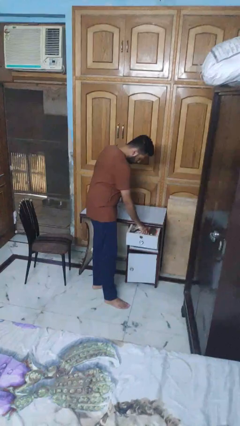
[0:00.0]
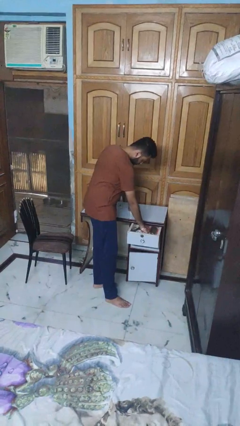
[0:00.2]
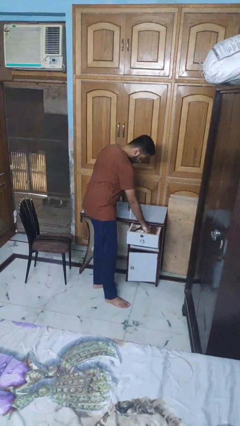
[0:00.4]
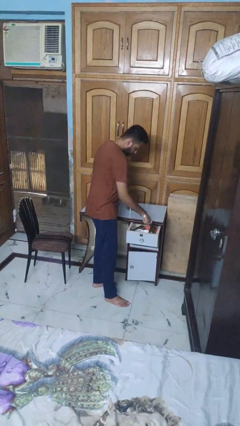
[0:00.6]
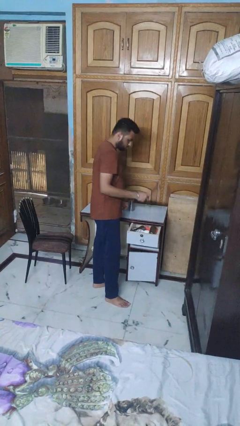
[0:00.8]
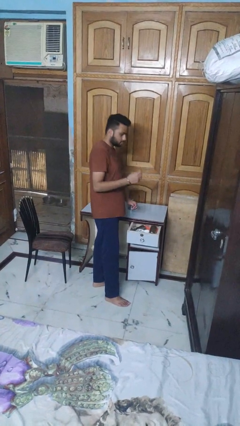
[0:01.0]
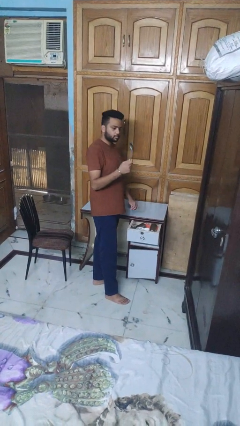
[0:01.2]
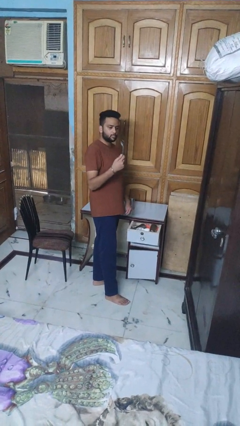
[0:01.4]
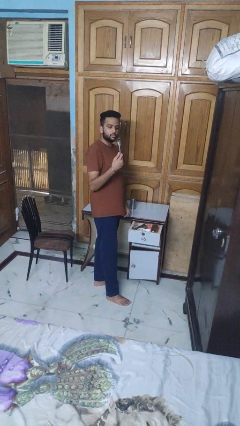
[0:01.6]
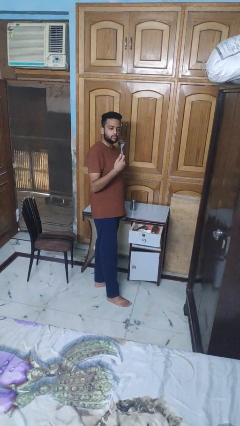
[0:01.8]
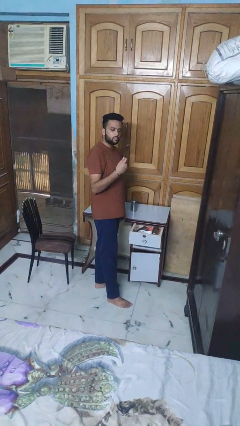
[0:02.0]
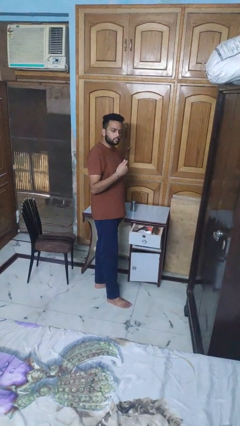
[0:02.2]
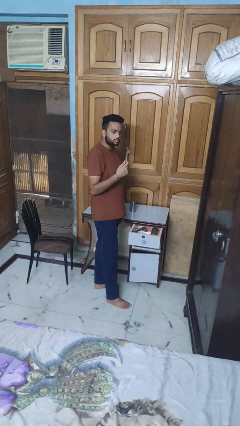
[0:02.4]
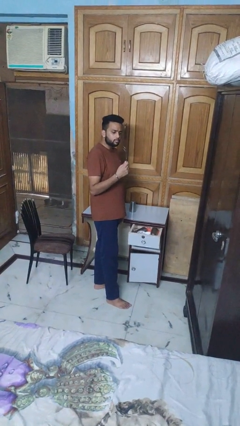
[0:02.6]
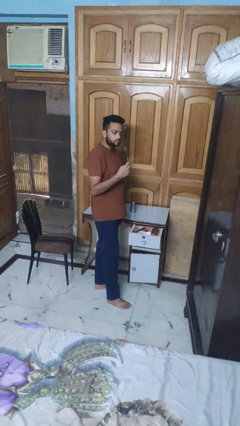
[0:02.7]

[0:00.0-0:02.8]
person takes object from kitchen drawer

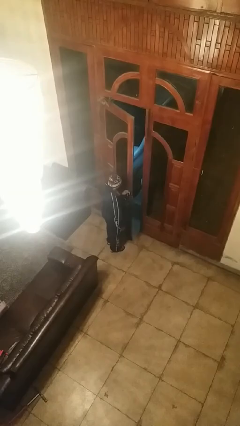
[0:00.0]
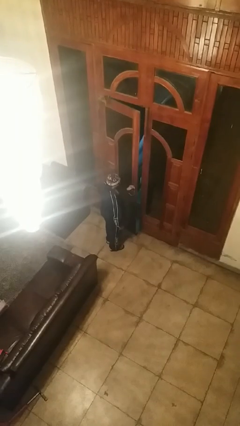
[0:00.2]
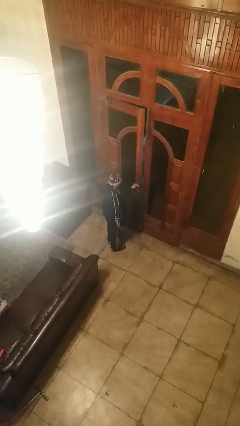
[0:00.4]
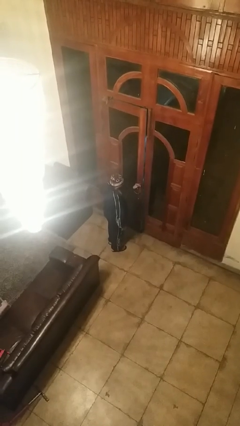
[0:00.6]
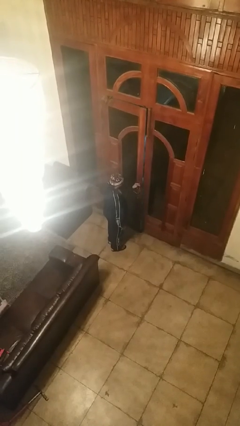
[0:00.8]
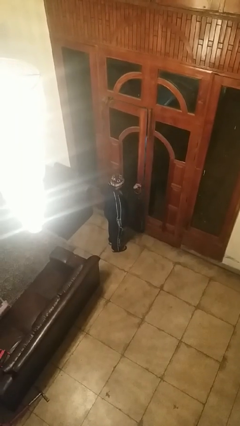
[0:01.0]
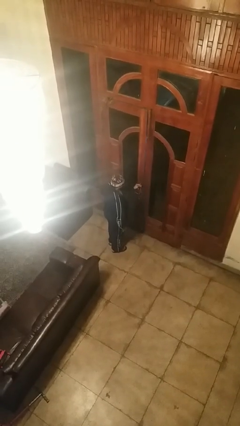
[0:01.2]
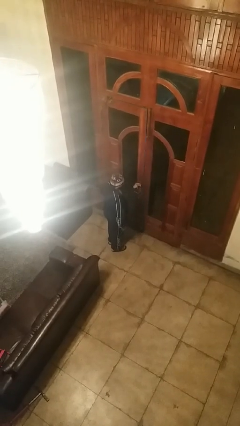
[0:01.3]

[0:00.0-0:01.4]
person closes facility door

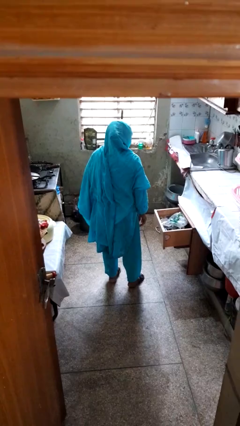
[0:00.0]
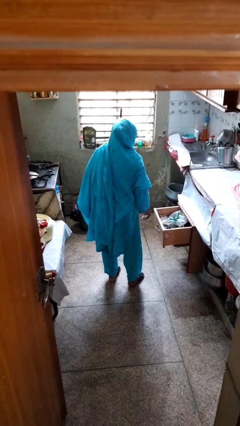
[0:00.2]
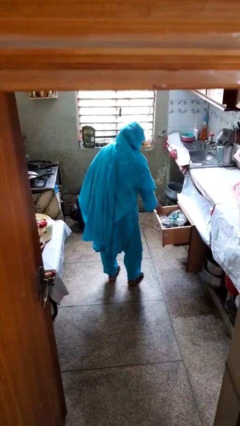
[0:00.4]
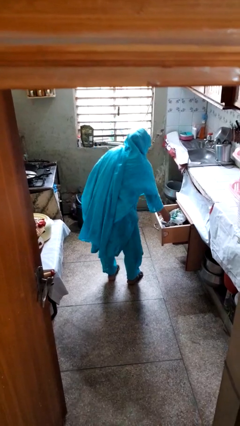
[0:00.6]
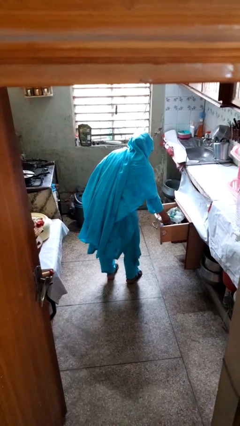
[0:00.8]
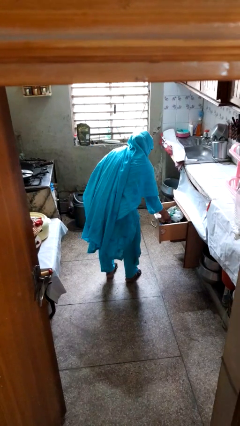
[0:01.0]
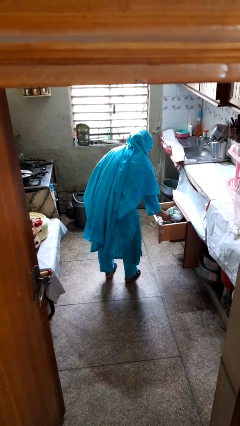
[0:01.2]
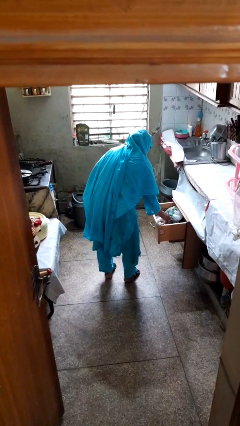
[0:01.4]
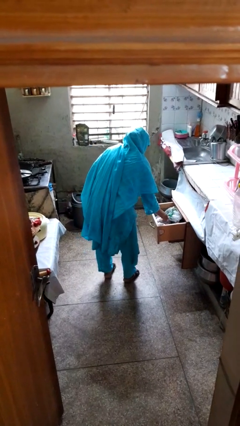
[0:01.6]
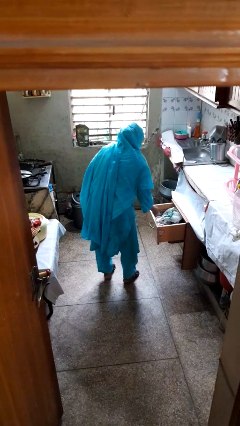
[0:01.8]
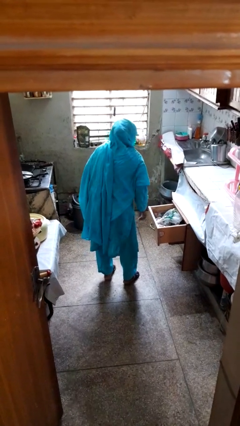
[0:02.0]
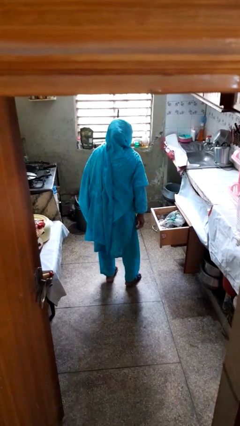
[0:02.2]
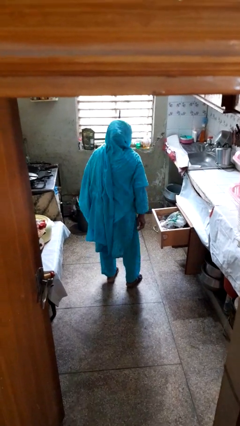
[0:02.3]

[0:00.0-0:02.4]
person searches in kitchen drawer

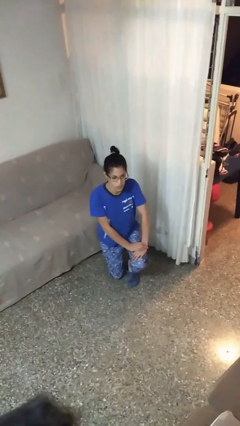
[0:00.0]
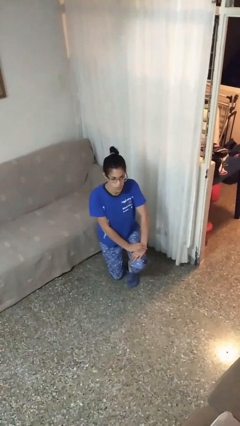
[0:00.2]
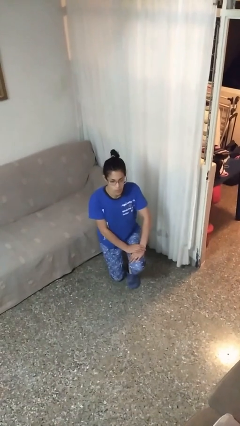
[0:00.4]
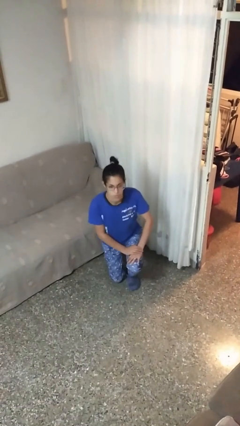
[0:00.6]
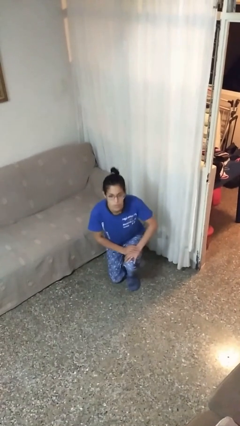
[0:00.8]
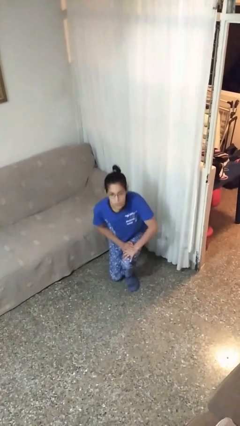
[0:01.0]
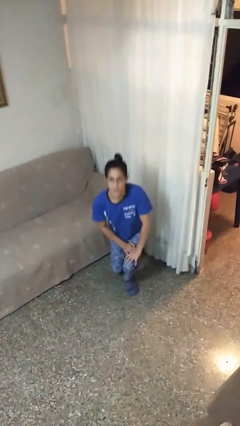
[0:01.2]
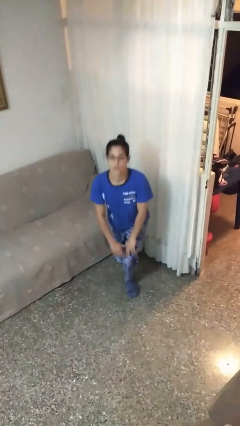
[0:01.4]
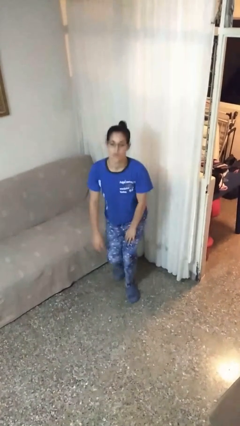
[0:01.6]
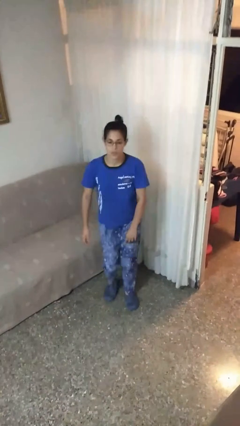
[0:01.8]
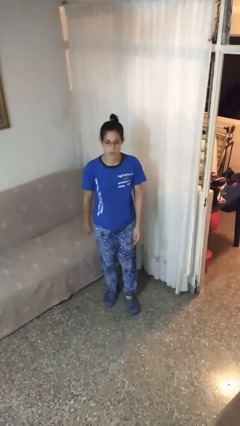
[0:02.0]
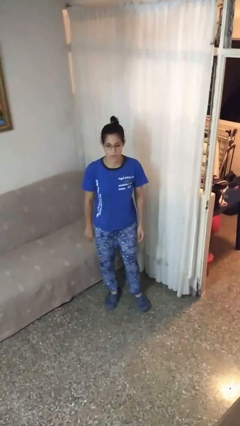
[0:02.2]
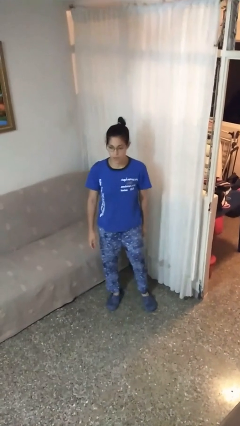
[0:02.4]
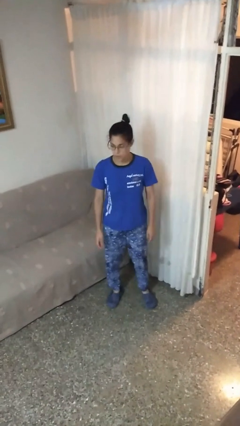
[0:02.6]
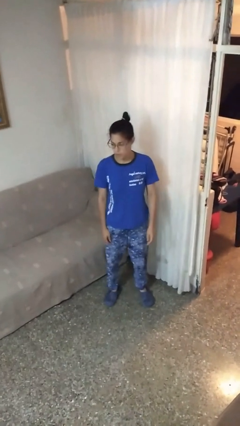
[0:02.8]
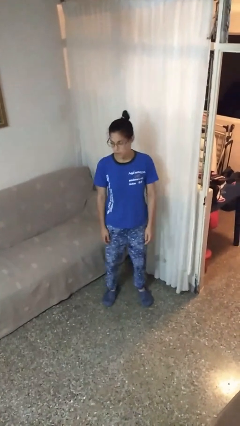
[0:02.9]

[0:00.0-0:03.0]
person stands up from floor

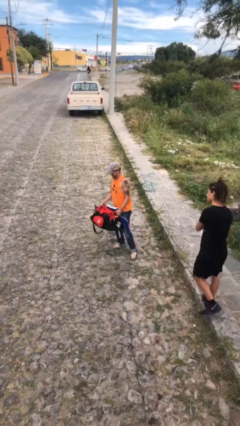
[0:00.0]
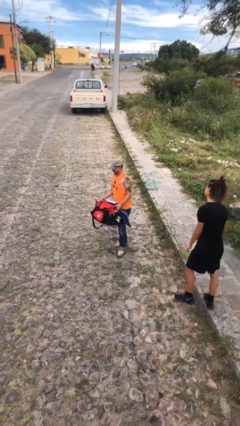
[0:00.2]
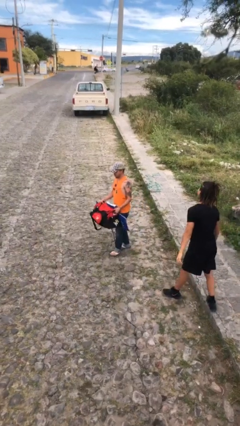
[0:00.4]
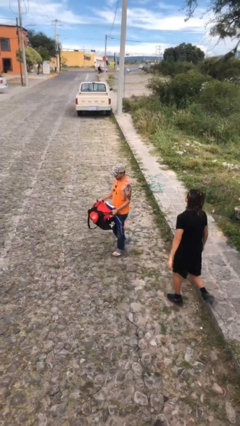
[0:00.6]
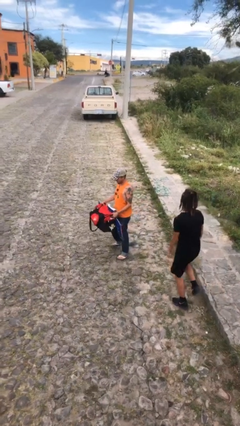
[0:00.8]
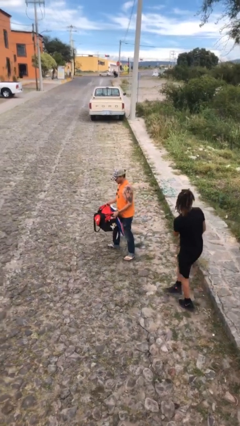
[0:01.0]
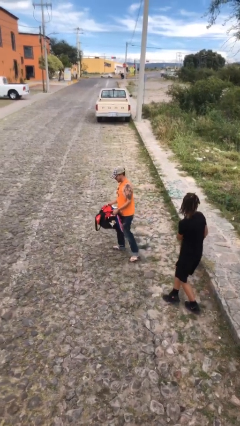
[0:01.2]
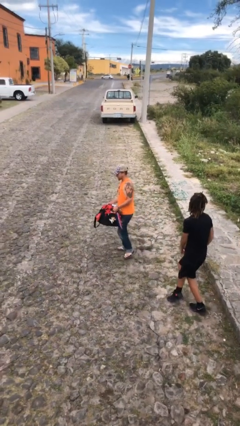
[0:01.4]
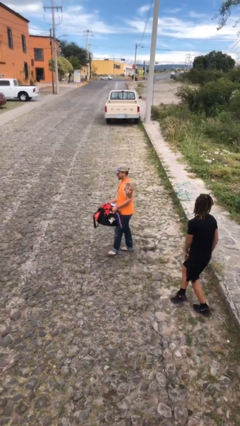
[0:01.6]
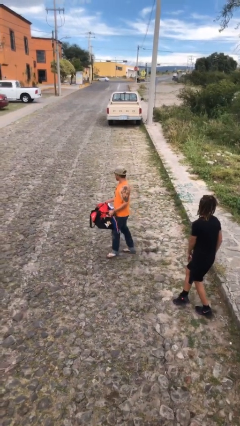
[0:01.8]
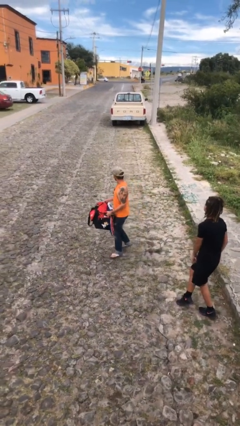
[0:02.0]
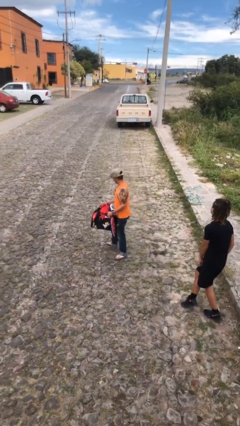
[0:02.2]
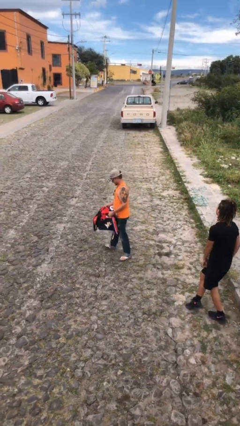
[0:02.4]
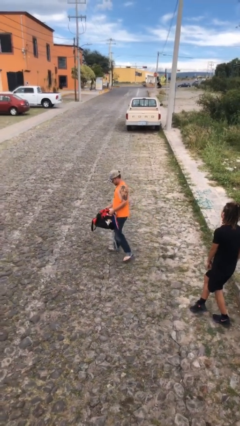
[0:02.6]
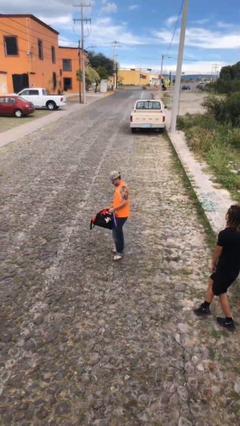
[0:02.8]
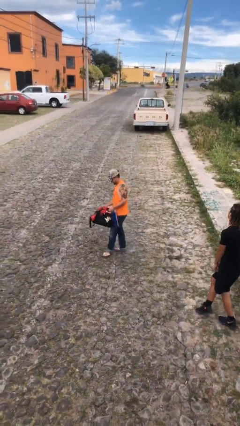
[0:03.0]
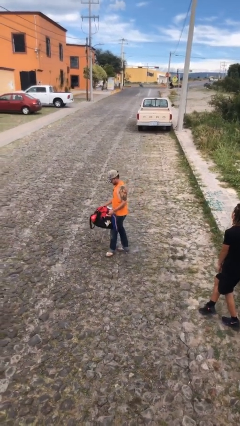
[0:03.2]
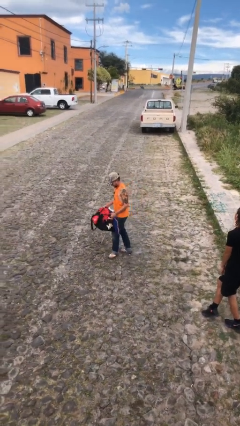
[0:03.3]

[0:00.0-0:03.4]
person carries heavy object

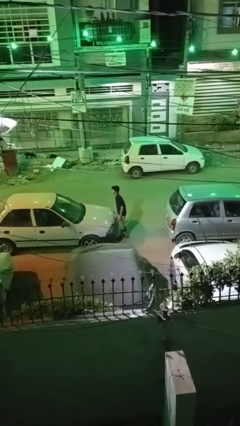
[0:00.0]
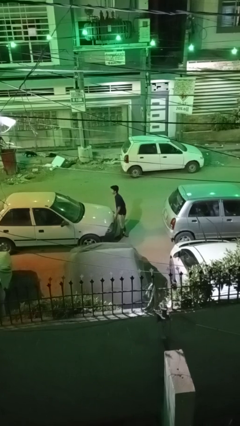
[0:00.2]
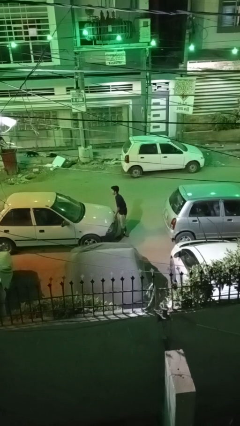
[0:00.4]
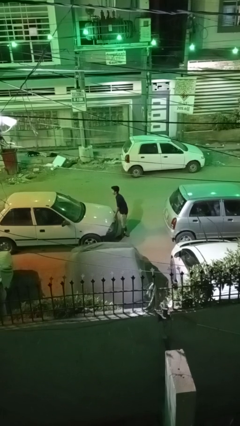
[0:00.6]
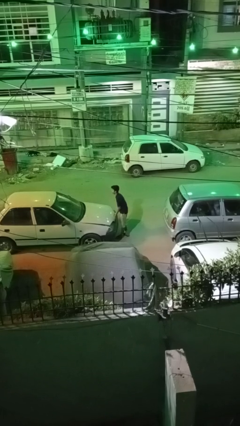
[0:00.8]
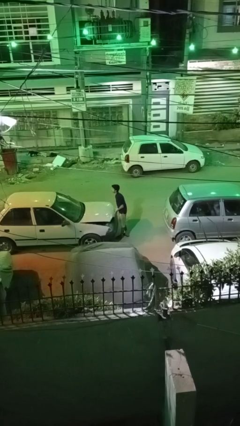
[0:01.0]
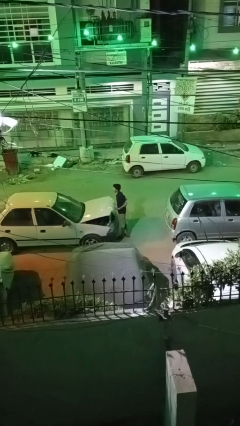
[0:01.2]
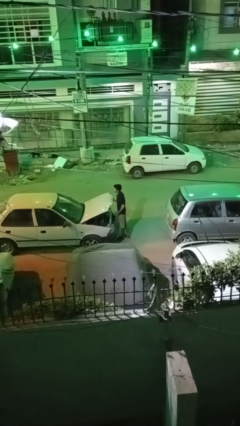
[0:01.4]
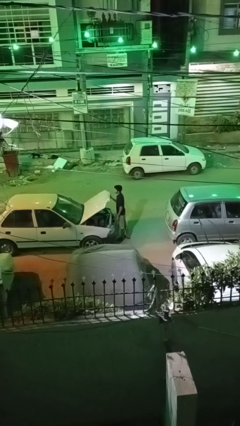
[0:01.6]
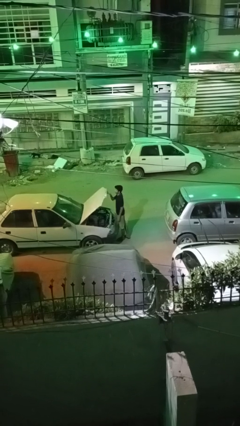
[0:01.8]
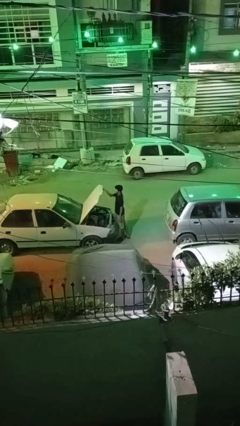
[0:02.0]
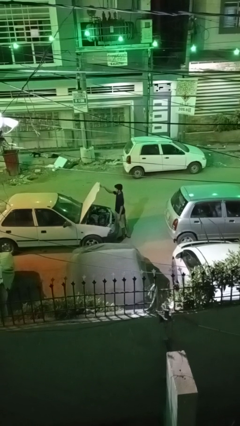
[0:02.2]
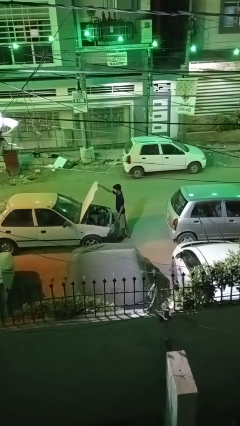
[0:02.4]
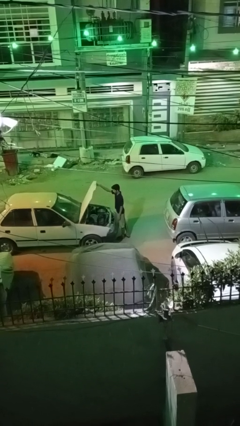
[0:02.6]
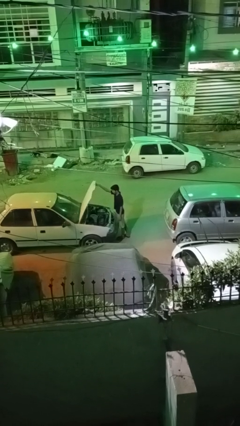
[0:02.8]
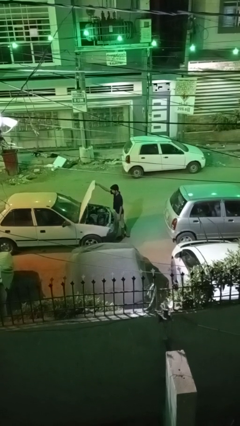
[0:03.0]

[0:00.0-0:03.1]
person opens car hood

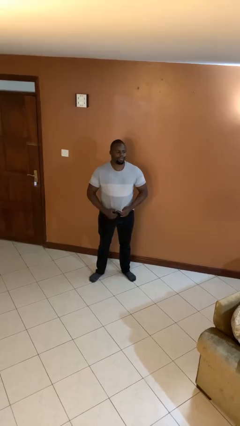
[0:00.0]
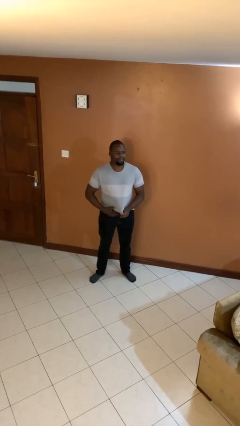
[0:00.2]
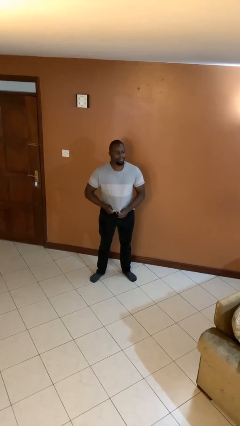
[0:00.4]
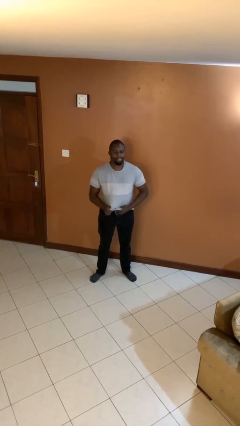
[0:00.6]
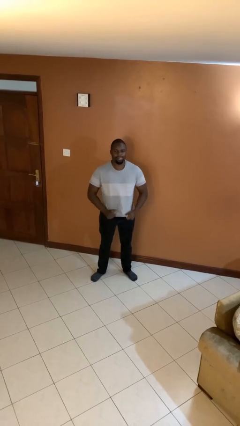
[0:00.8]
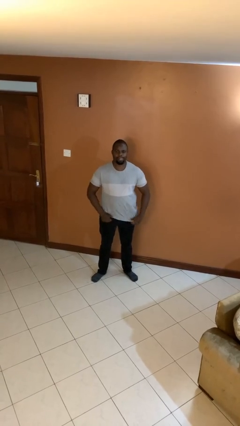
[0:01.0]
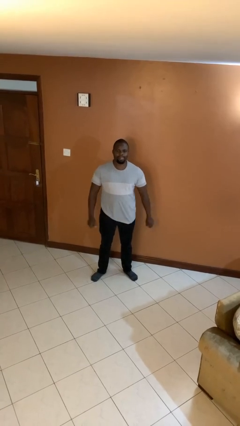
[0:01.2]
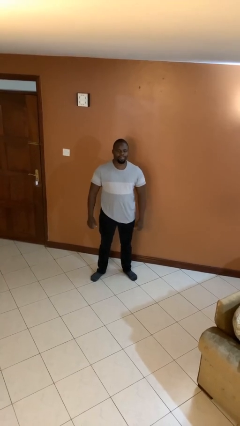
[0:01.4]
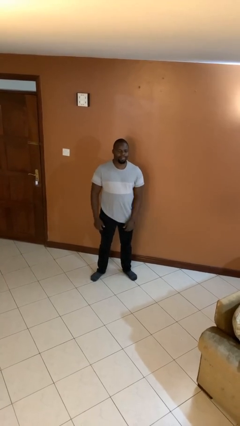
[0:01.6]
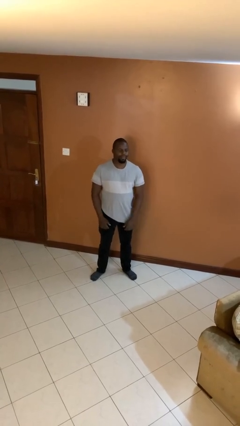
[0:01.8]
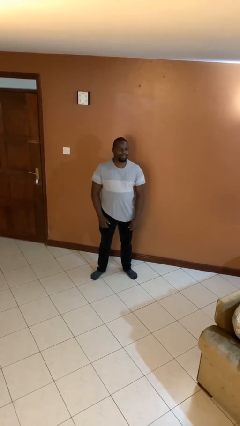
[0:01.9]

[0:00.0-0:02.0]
person untucks shirt
